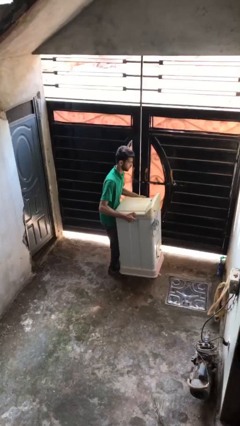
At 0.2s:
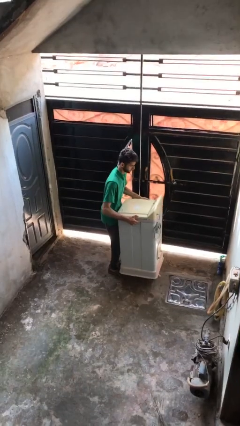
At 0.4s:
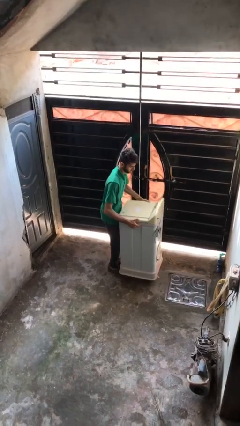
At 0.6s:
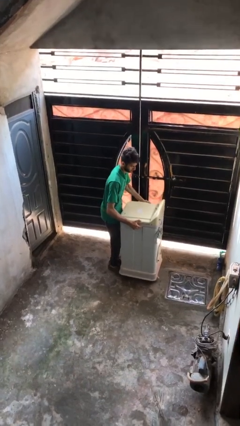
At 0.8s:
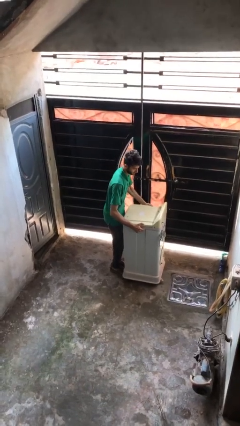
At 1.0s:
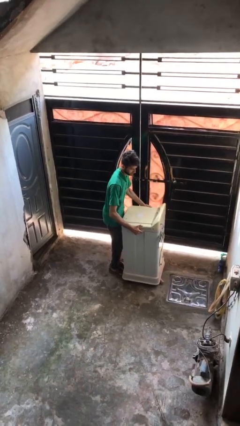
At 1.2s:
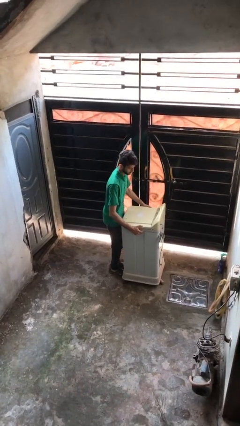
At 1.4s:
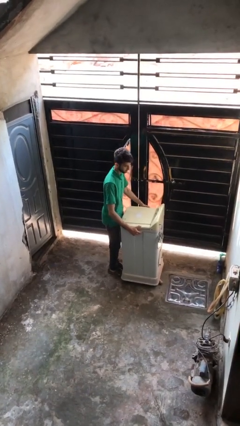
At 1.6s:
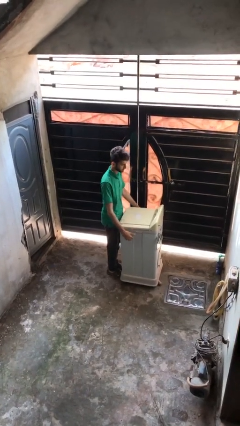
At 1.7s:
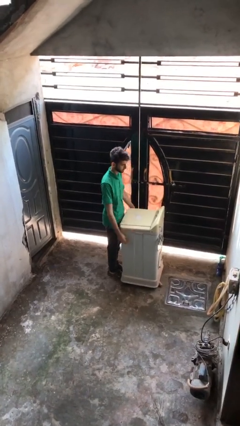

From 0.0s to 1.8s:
person puts down object on floor

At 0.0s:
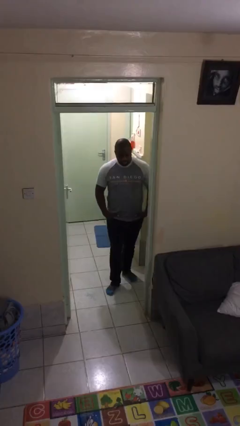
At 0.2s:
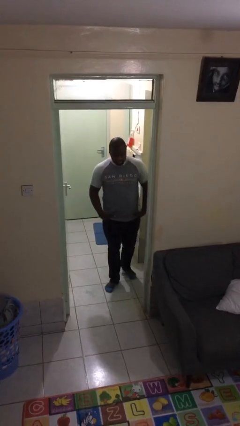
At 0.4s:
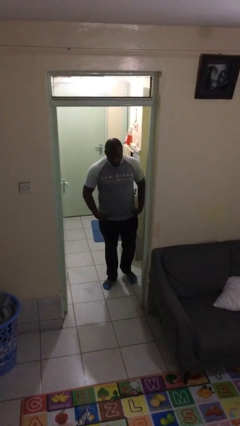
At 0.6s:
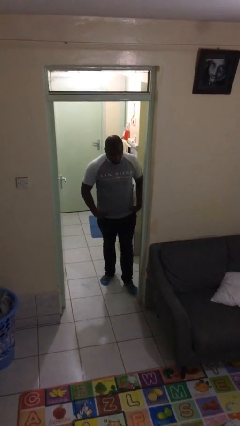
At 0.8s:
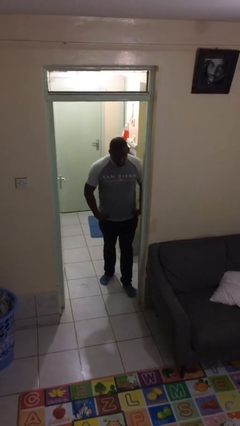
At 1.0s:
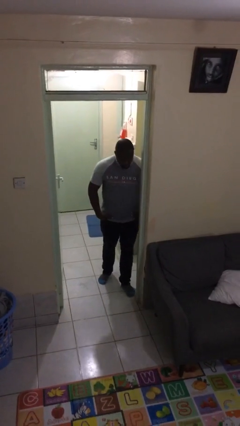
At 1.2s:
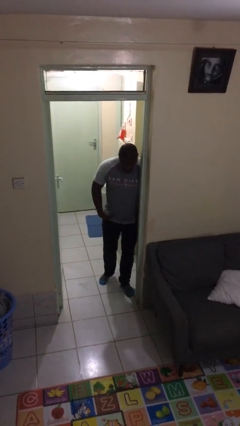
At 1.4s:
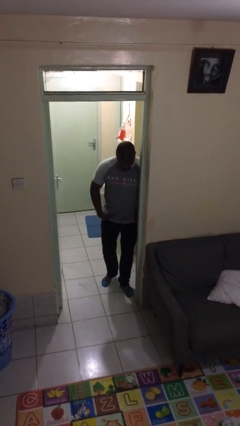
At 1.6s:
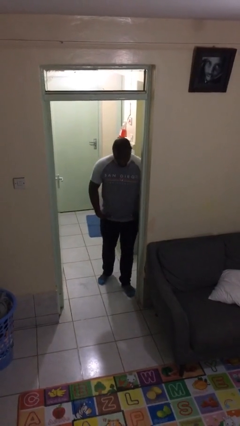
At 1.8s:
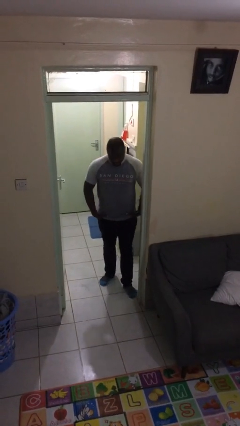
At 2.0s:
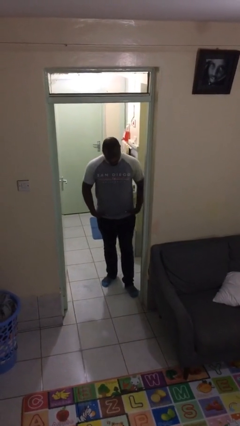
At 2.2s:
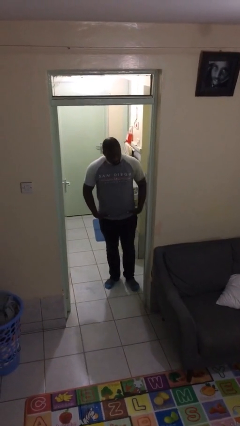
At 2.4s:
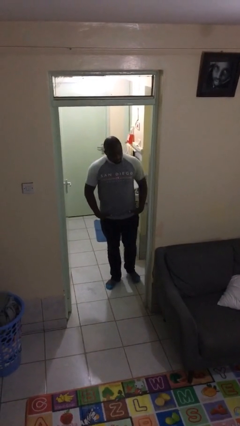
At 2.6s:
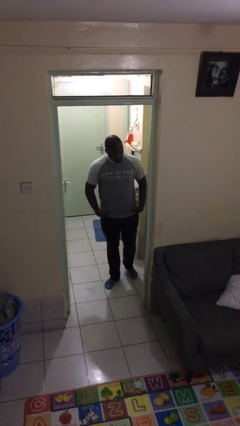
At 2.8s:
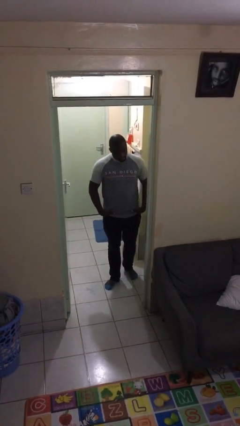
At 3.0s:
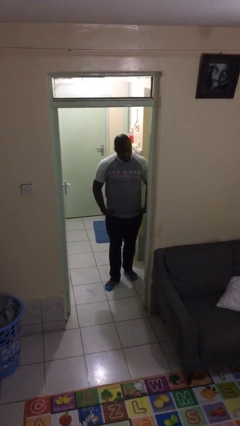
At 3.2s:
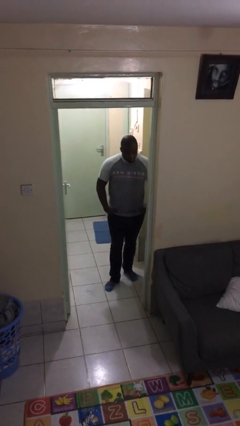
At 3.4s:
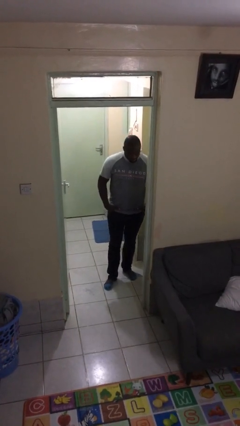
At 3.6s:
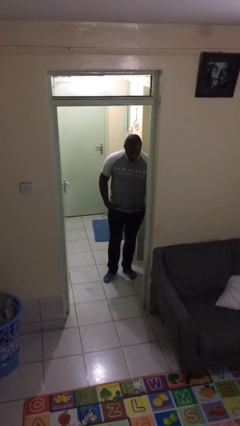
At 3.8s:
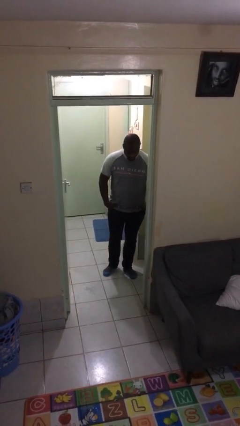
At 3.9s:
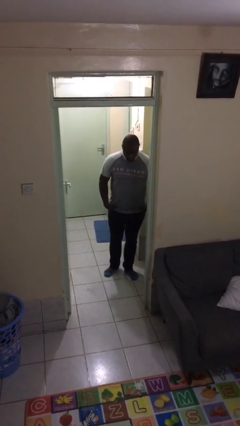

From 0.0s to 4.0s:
person bumps into wall

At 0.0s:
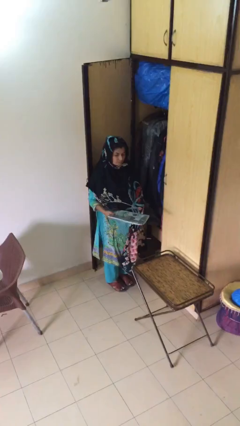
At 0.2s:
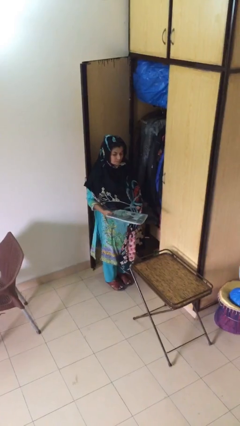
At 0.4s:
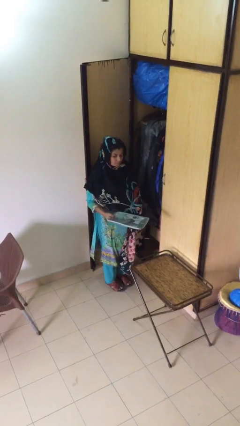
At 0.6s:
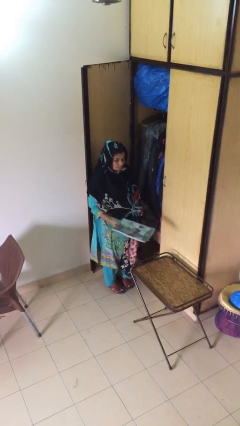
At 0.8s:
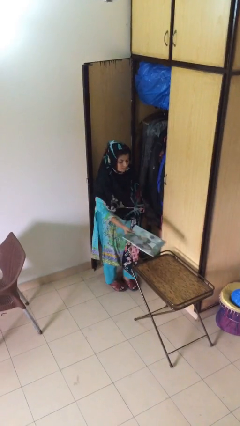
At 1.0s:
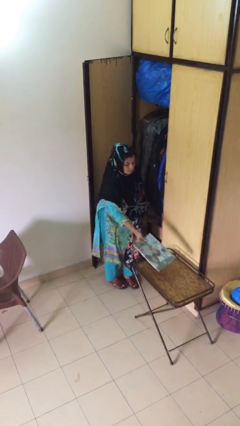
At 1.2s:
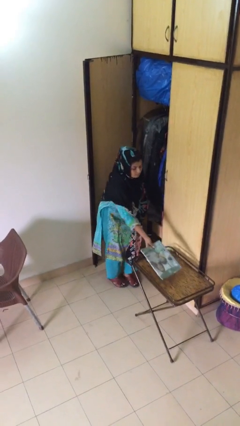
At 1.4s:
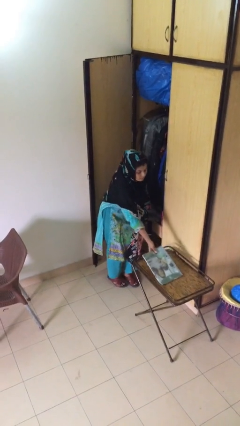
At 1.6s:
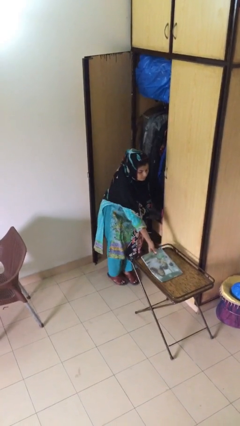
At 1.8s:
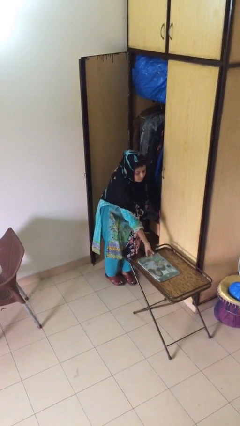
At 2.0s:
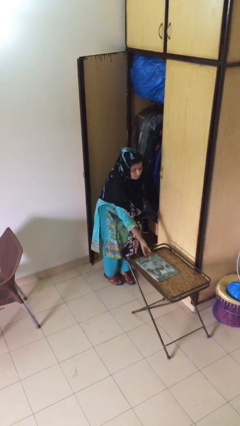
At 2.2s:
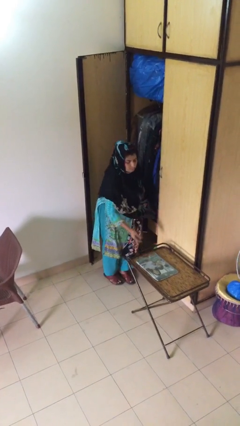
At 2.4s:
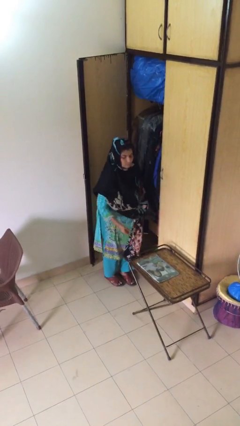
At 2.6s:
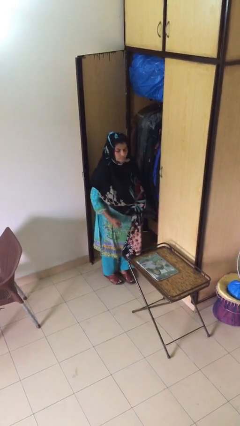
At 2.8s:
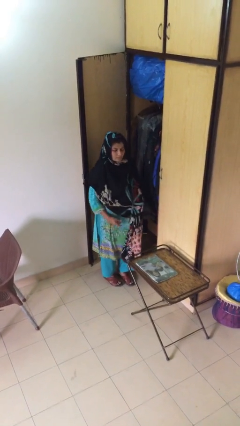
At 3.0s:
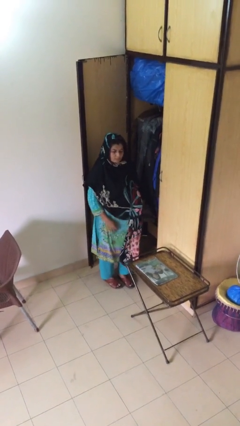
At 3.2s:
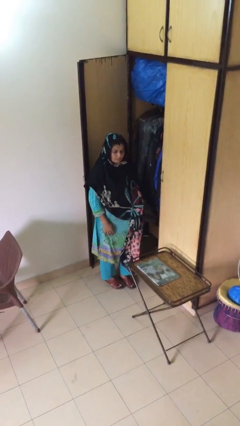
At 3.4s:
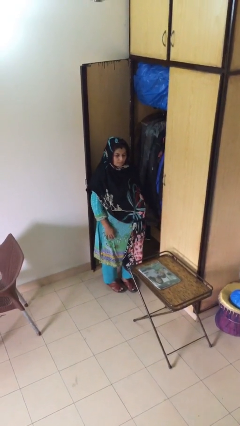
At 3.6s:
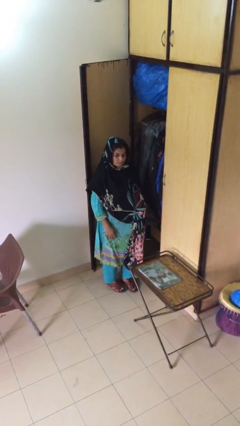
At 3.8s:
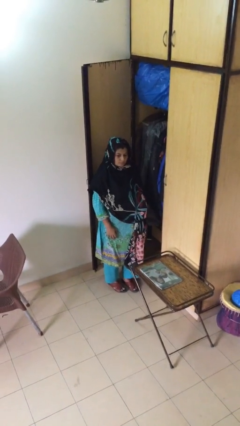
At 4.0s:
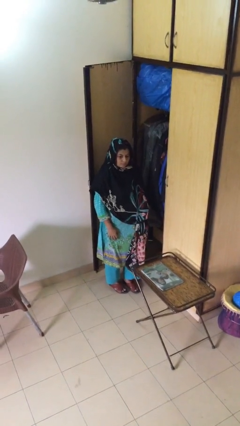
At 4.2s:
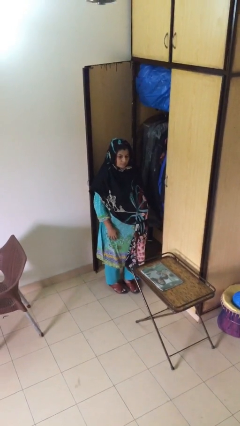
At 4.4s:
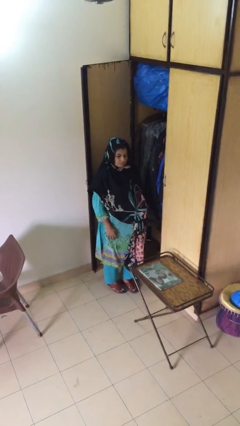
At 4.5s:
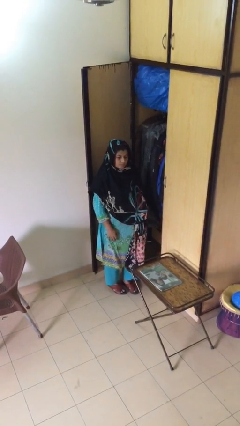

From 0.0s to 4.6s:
person puts down object on table

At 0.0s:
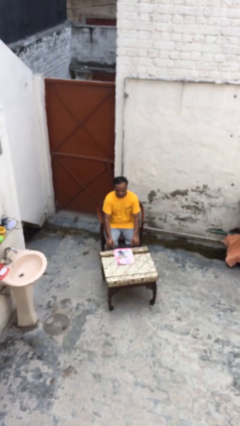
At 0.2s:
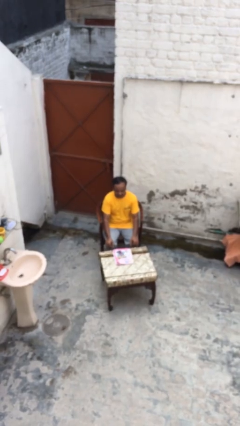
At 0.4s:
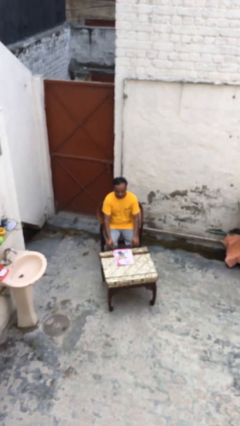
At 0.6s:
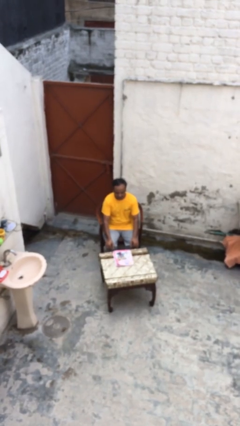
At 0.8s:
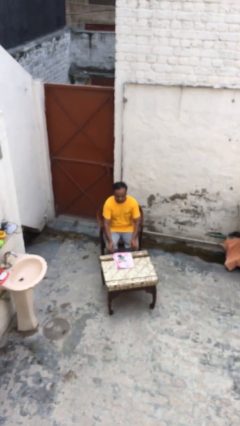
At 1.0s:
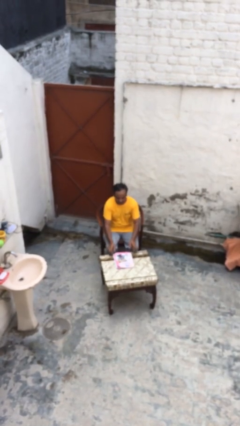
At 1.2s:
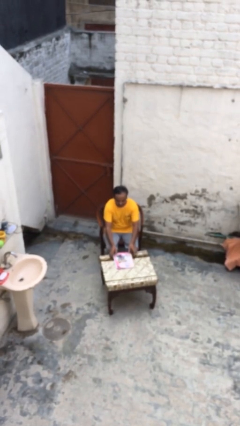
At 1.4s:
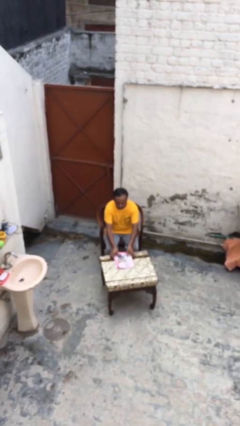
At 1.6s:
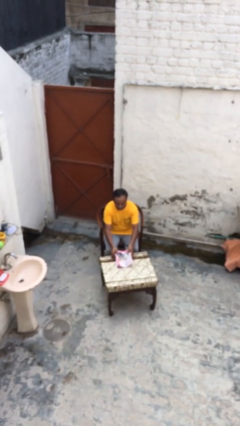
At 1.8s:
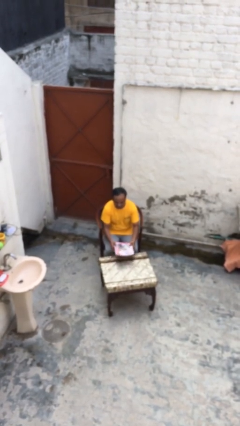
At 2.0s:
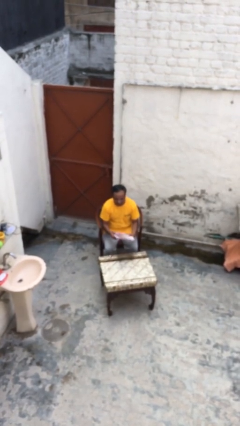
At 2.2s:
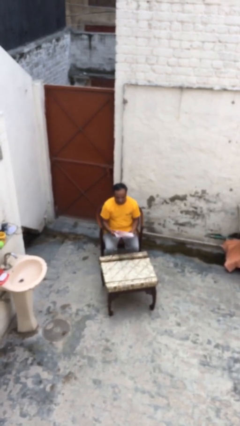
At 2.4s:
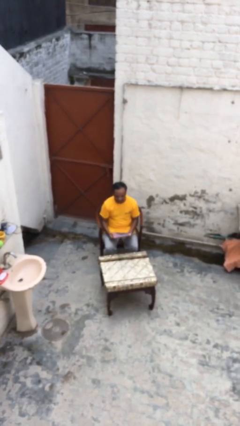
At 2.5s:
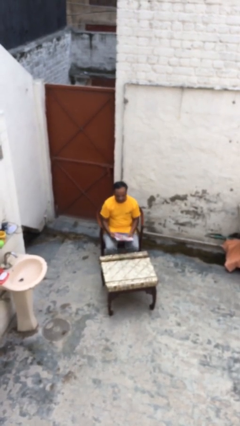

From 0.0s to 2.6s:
person picks up object from table

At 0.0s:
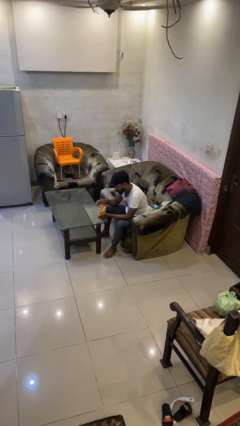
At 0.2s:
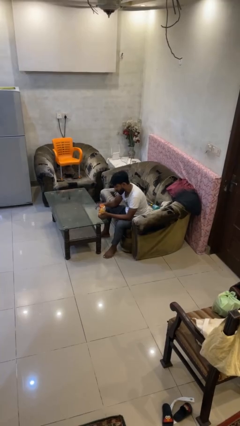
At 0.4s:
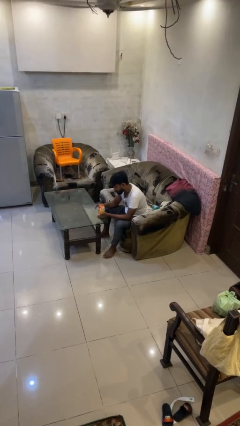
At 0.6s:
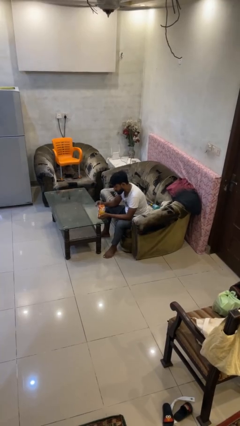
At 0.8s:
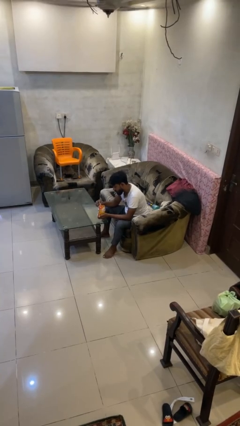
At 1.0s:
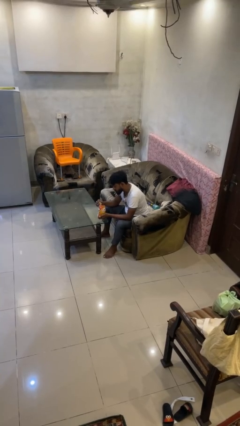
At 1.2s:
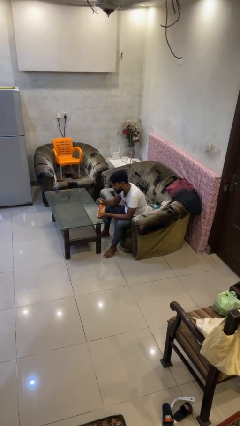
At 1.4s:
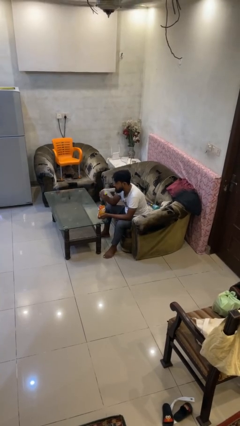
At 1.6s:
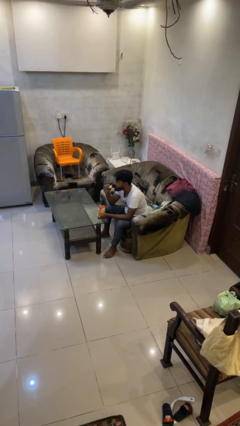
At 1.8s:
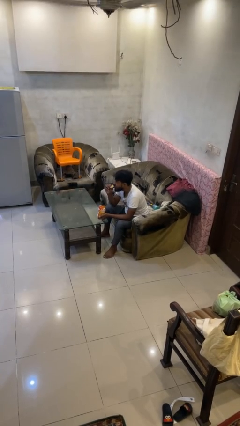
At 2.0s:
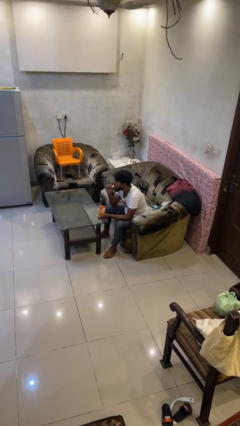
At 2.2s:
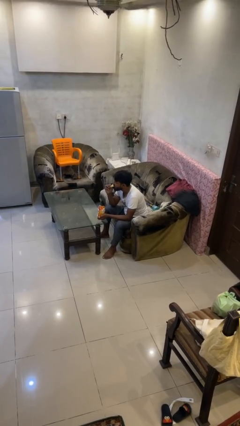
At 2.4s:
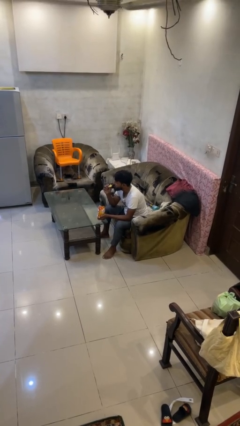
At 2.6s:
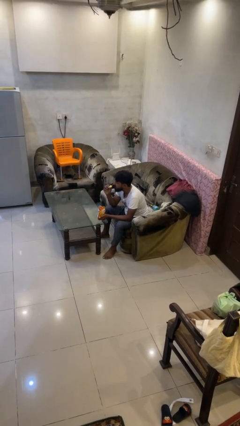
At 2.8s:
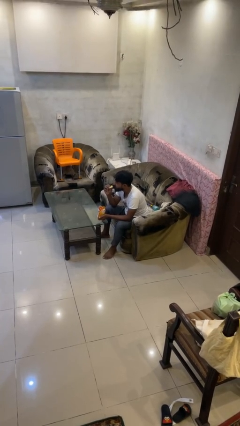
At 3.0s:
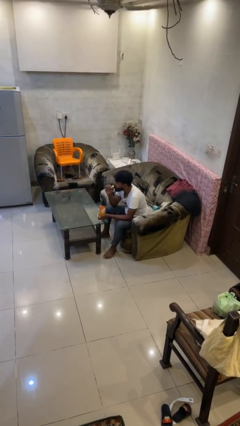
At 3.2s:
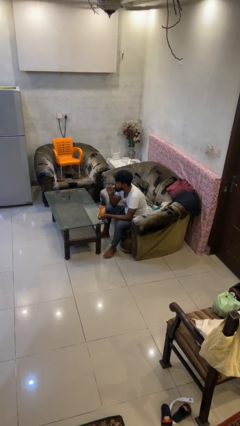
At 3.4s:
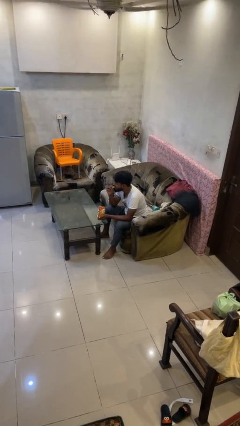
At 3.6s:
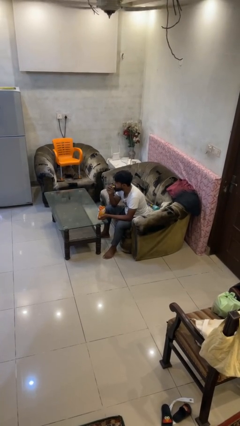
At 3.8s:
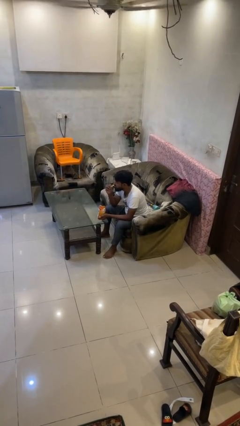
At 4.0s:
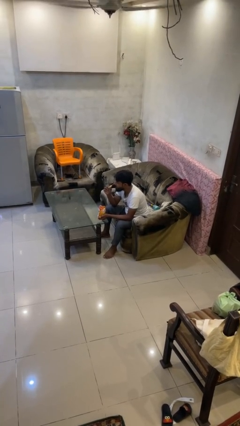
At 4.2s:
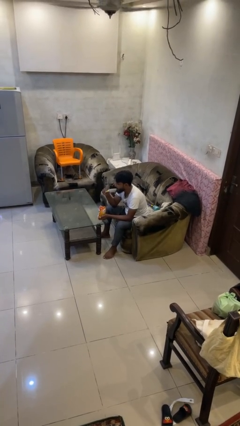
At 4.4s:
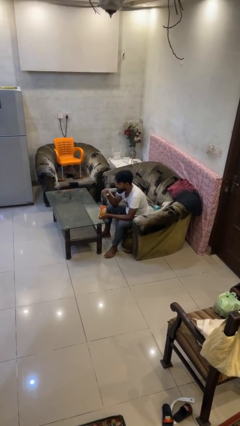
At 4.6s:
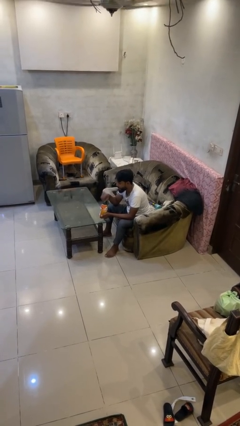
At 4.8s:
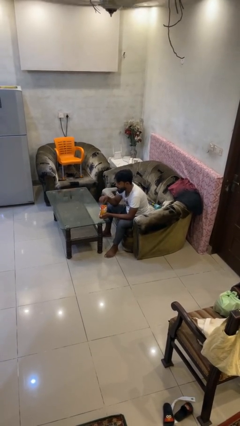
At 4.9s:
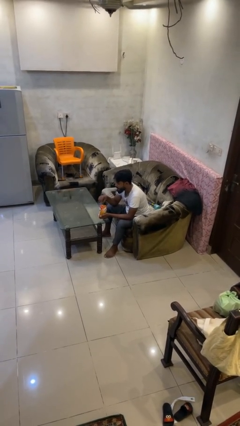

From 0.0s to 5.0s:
person eats snack from bag
